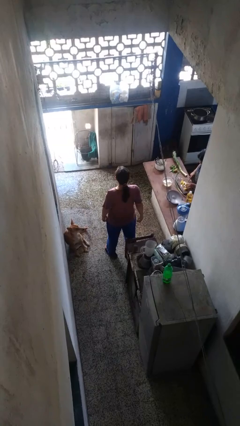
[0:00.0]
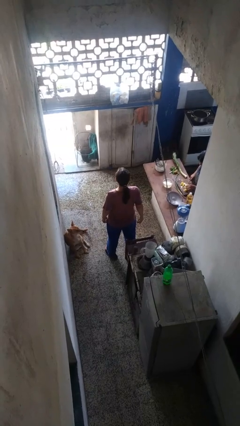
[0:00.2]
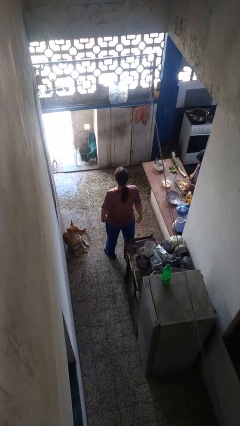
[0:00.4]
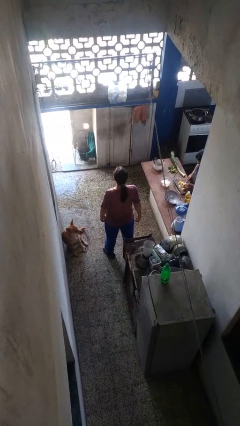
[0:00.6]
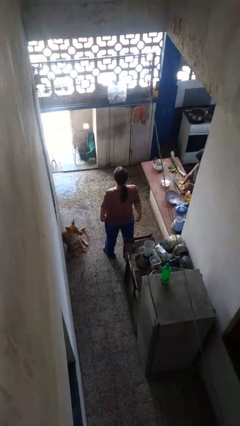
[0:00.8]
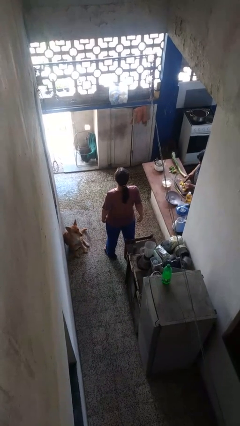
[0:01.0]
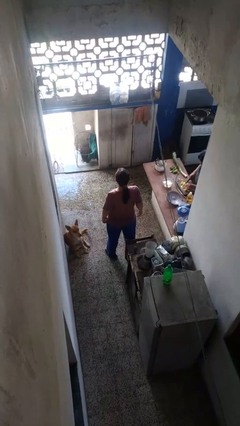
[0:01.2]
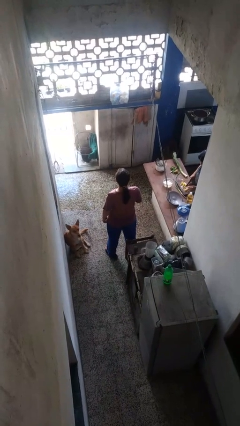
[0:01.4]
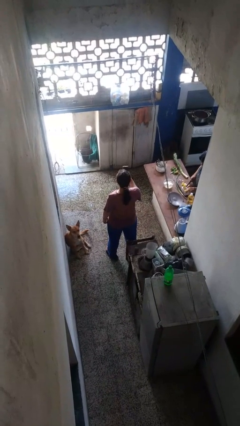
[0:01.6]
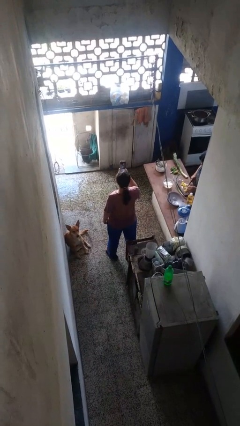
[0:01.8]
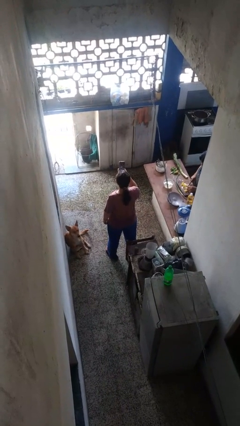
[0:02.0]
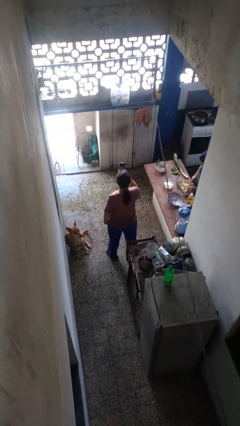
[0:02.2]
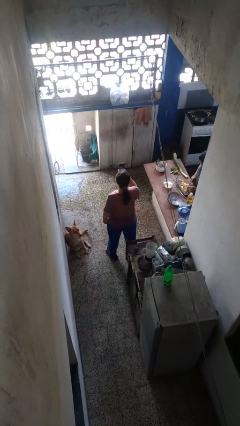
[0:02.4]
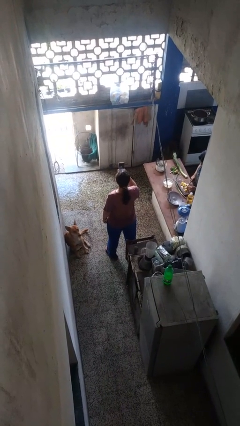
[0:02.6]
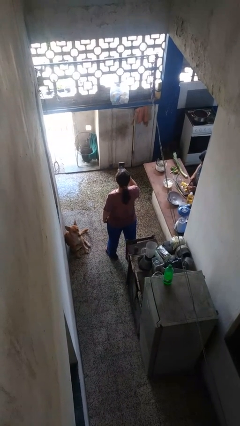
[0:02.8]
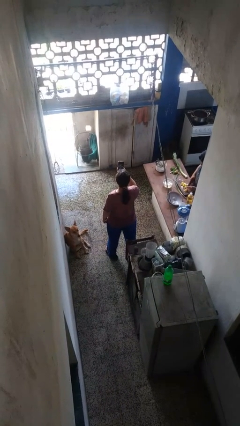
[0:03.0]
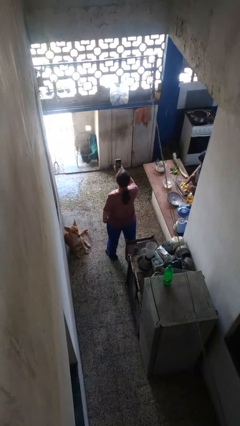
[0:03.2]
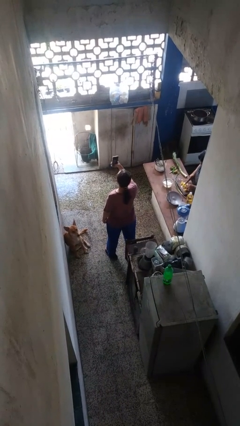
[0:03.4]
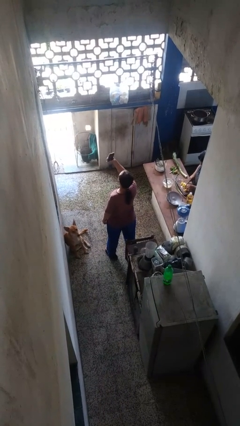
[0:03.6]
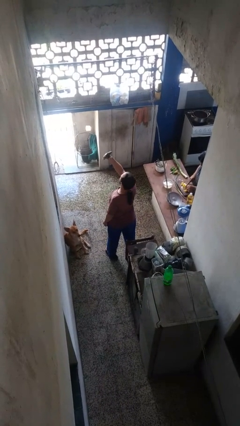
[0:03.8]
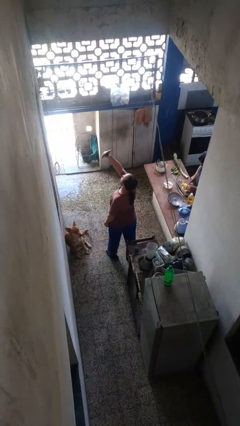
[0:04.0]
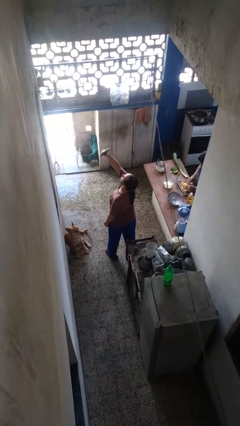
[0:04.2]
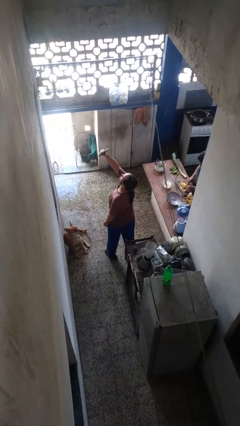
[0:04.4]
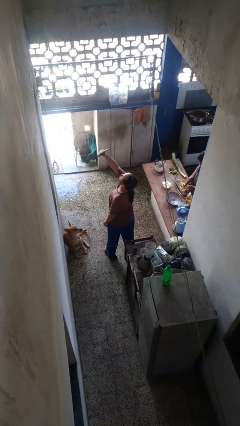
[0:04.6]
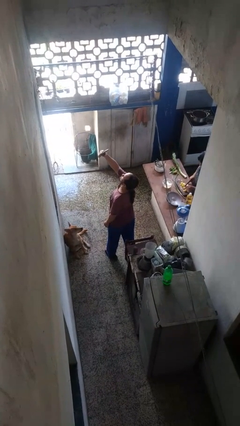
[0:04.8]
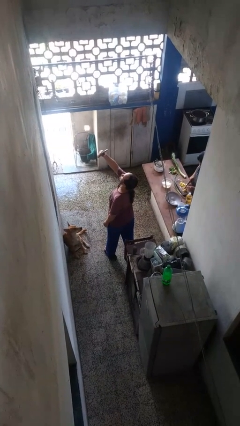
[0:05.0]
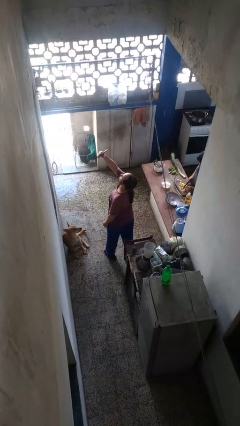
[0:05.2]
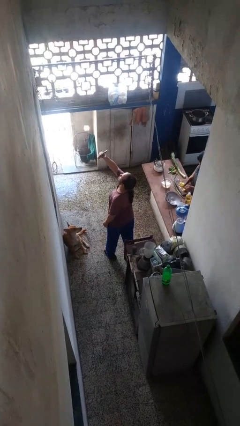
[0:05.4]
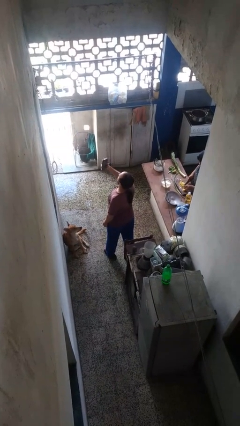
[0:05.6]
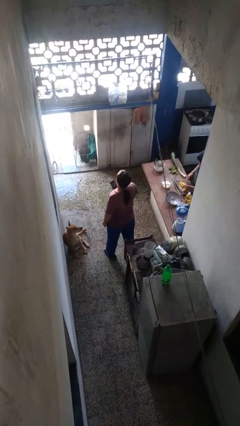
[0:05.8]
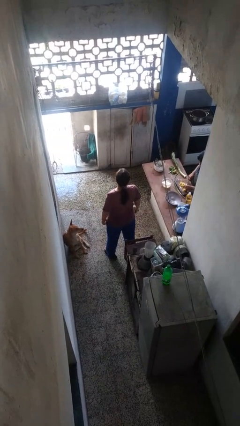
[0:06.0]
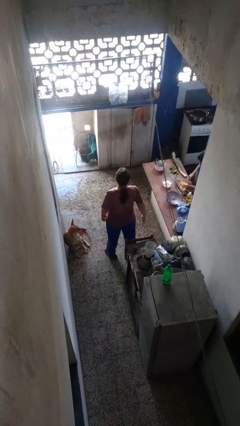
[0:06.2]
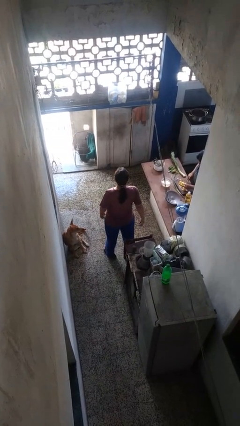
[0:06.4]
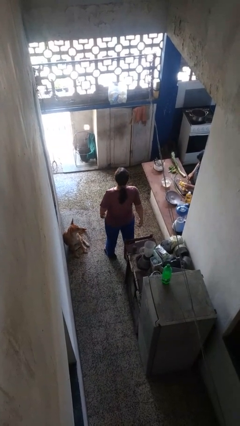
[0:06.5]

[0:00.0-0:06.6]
person takes selfie

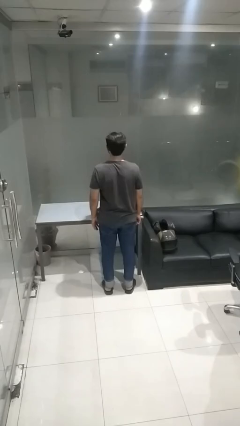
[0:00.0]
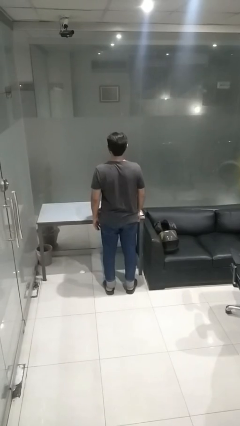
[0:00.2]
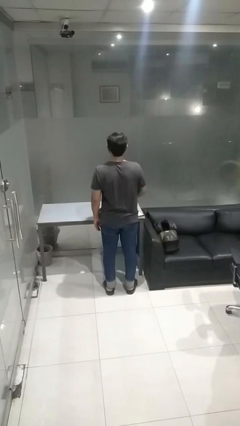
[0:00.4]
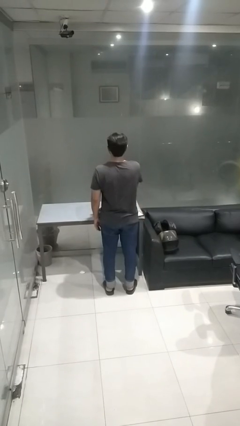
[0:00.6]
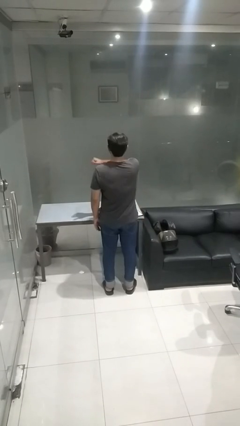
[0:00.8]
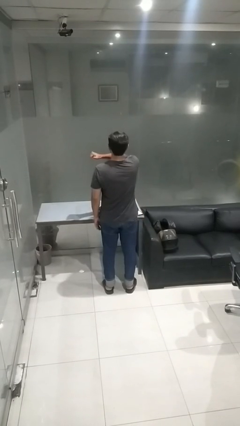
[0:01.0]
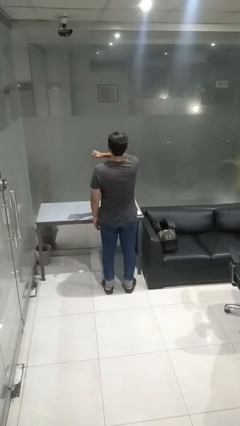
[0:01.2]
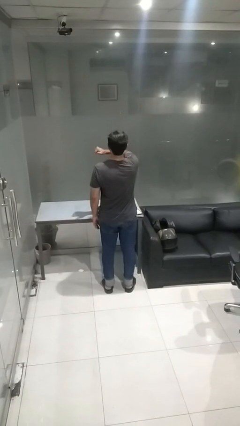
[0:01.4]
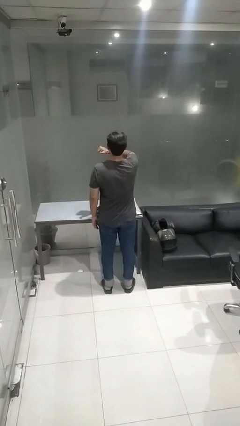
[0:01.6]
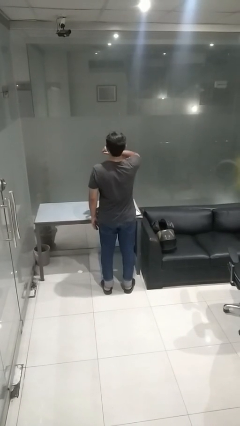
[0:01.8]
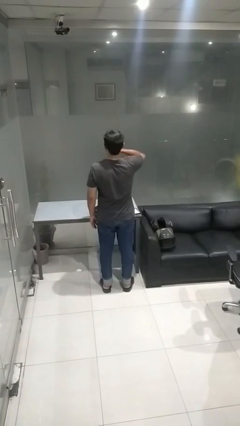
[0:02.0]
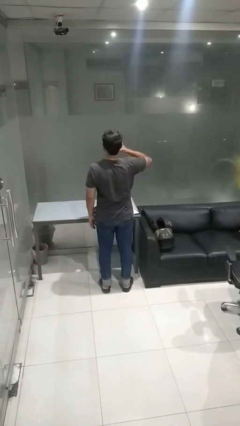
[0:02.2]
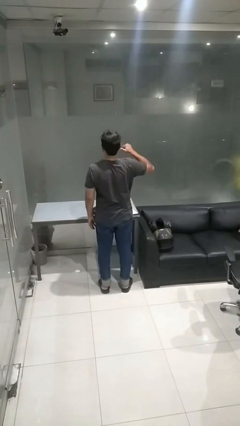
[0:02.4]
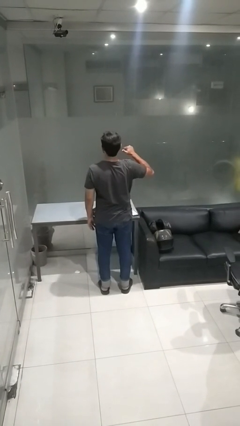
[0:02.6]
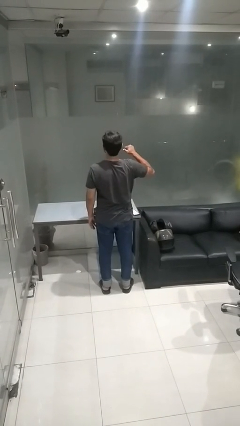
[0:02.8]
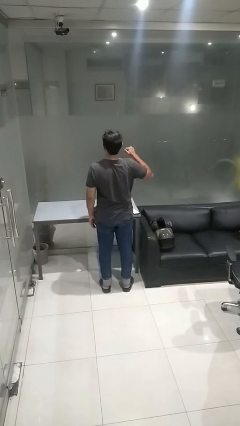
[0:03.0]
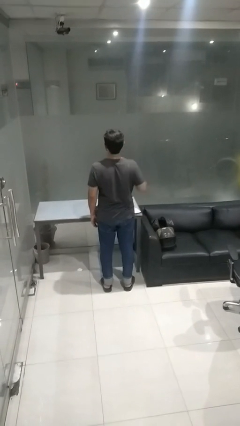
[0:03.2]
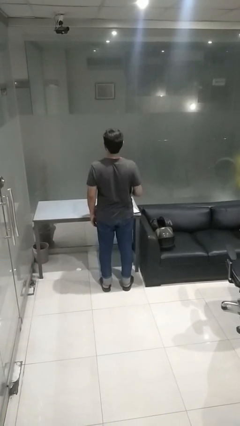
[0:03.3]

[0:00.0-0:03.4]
person gestures cut

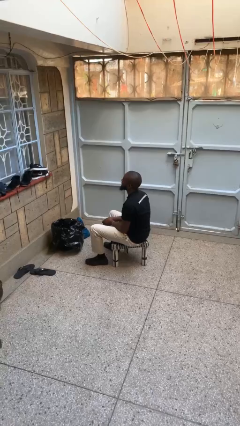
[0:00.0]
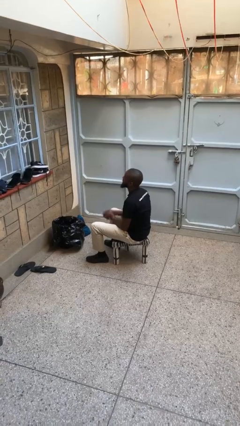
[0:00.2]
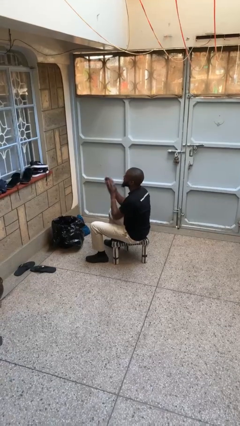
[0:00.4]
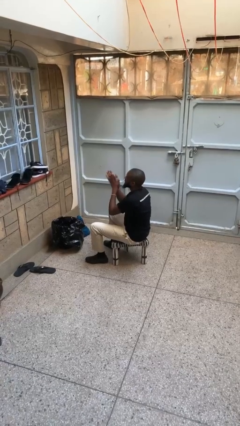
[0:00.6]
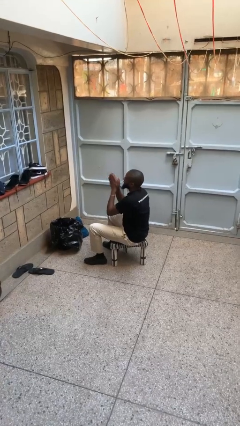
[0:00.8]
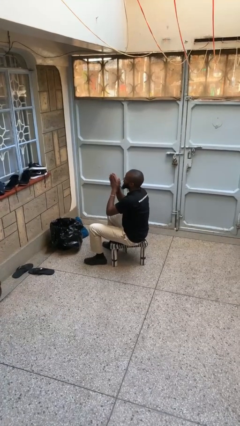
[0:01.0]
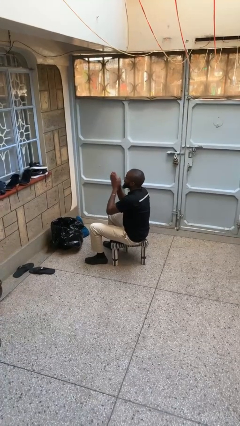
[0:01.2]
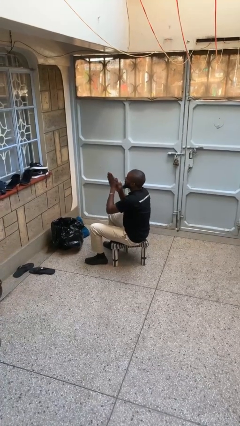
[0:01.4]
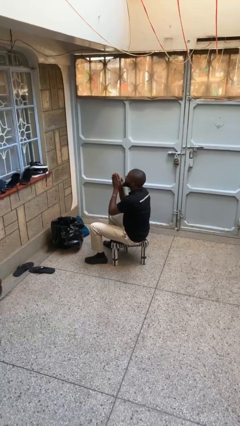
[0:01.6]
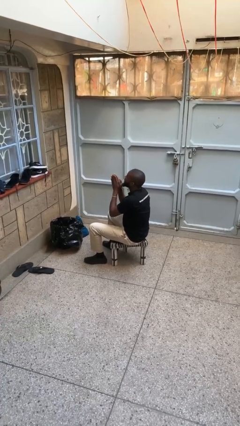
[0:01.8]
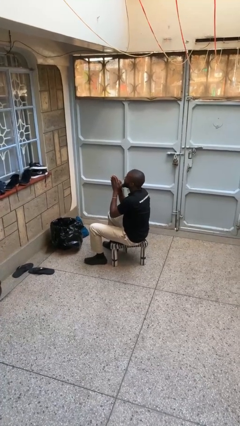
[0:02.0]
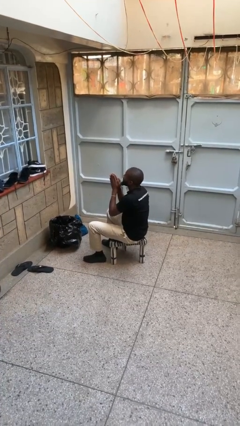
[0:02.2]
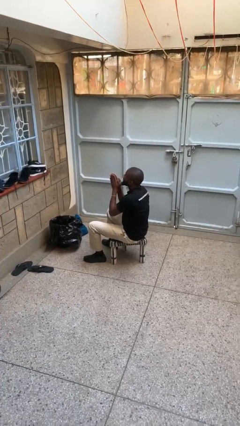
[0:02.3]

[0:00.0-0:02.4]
person blows into hands

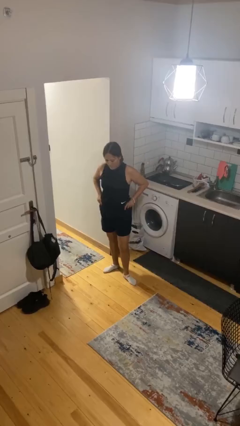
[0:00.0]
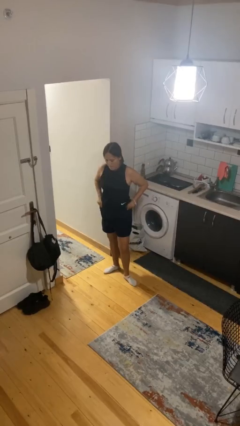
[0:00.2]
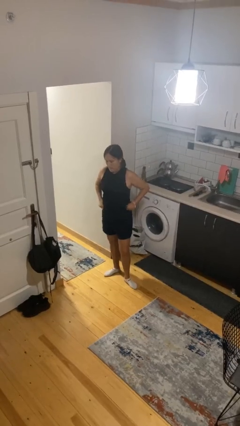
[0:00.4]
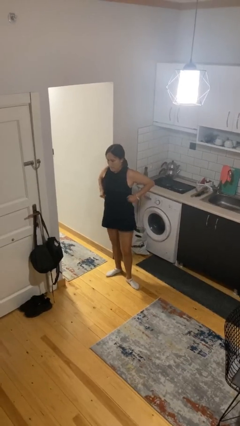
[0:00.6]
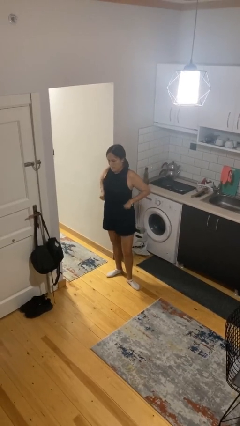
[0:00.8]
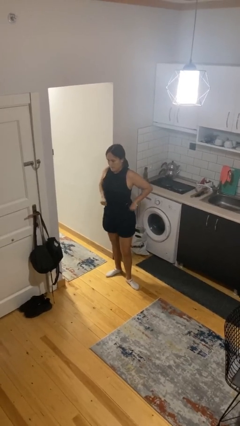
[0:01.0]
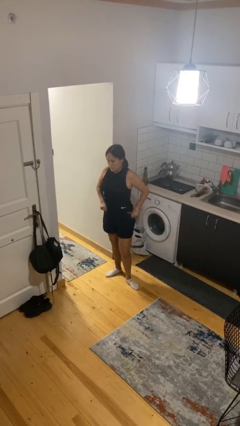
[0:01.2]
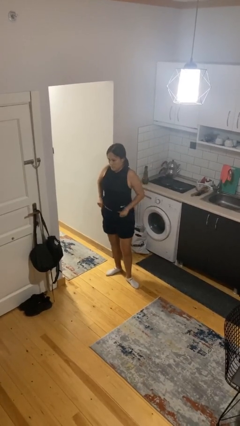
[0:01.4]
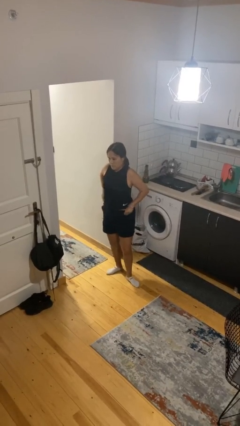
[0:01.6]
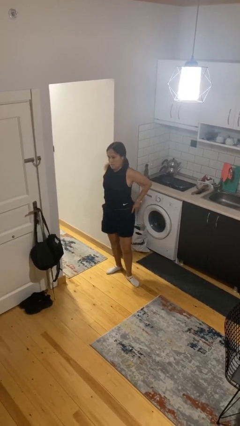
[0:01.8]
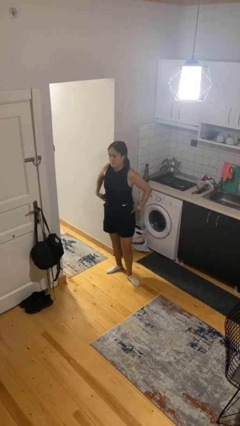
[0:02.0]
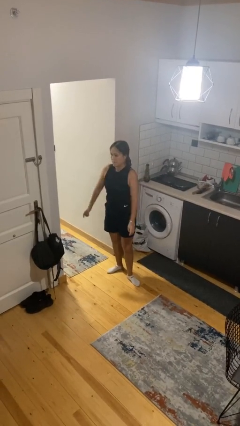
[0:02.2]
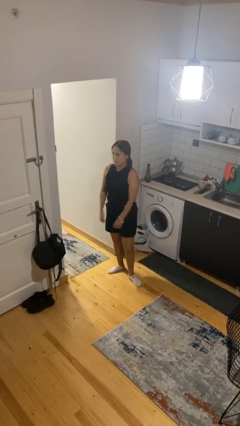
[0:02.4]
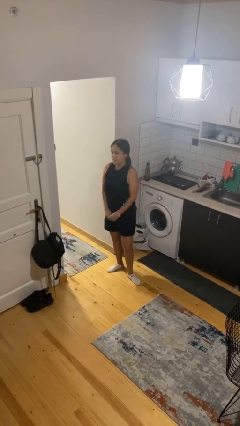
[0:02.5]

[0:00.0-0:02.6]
person hikes up pants

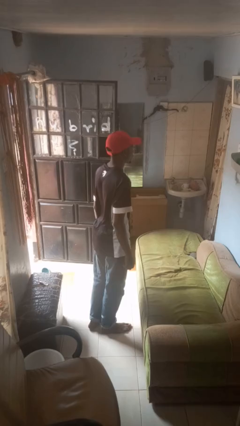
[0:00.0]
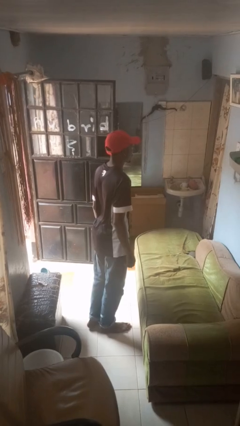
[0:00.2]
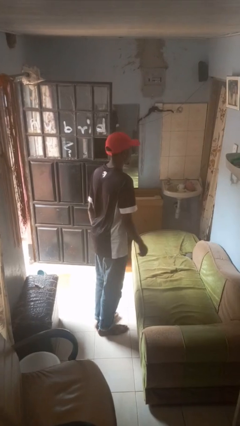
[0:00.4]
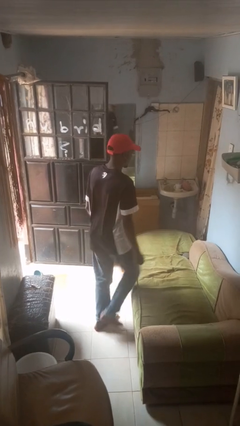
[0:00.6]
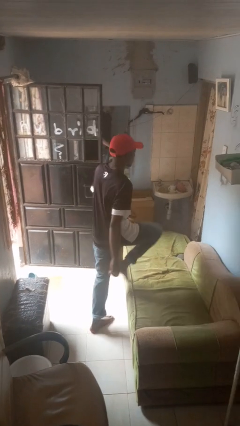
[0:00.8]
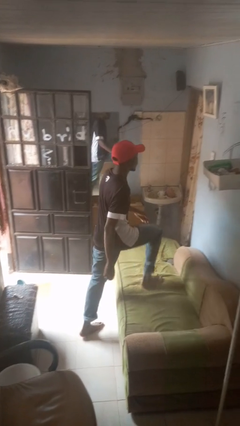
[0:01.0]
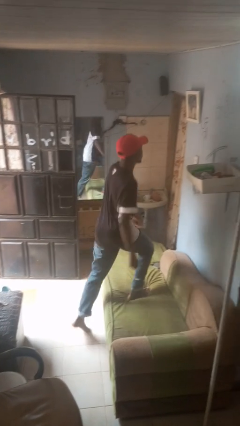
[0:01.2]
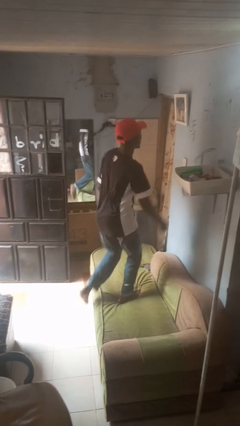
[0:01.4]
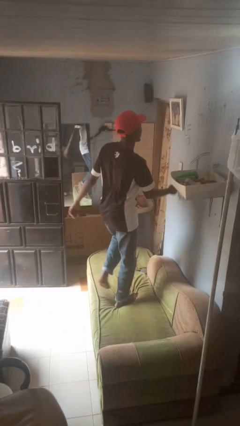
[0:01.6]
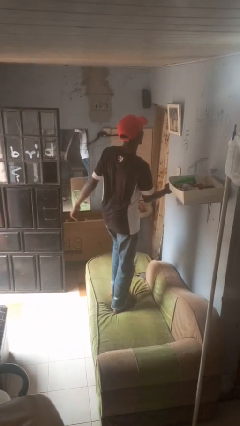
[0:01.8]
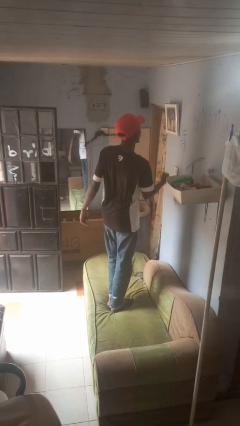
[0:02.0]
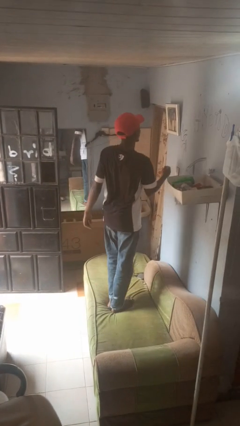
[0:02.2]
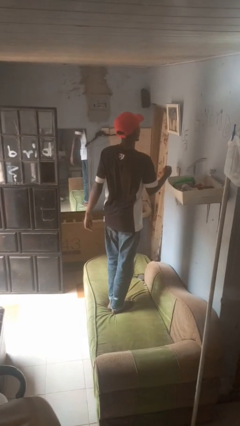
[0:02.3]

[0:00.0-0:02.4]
person climbs on couch

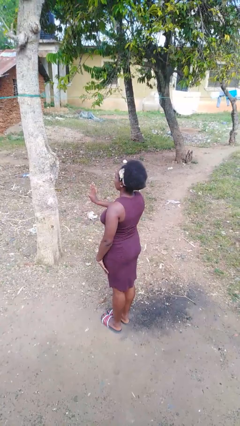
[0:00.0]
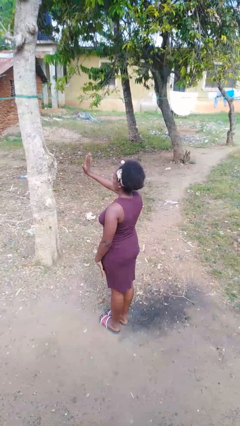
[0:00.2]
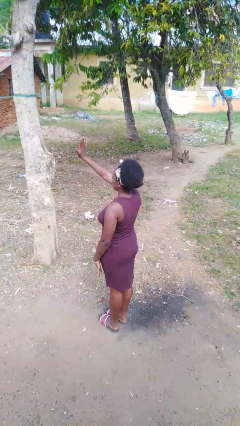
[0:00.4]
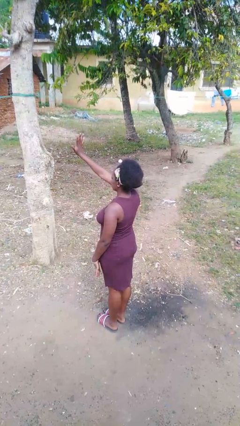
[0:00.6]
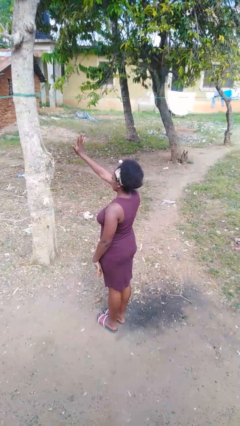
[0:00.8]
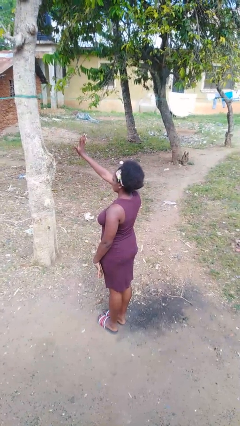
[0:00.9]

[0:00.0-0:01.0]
person gestures number five
